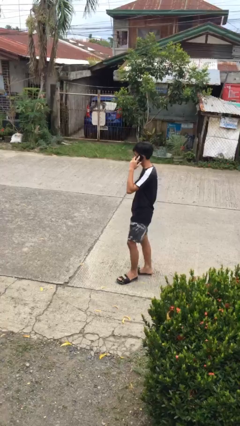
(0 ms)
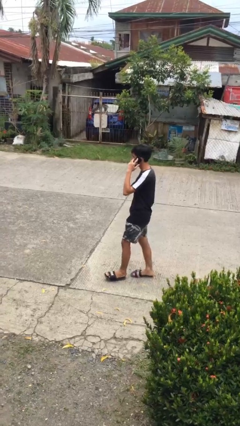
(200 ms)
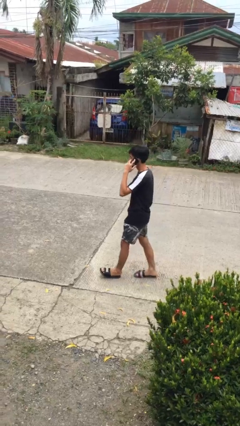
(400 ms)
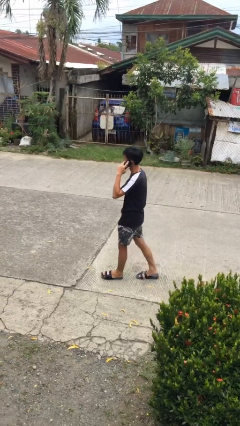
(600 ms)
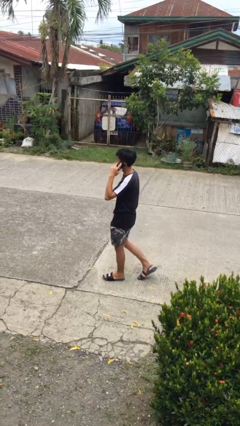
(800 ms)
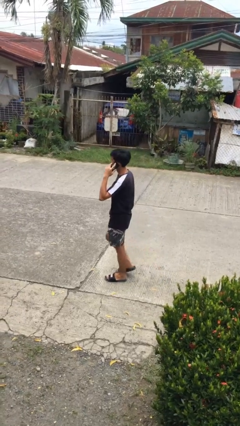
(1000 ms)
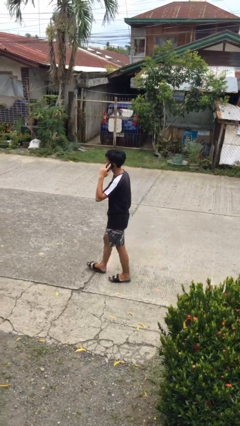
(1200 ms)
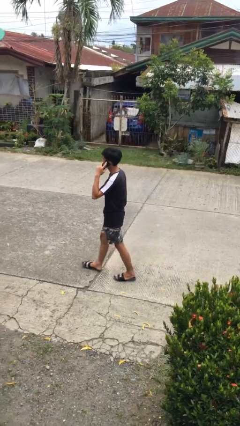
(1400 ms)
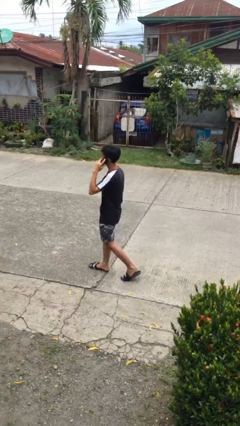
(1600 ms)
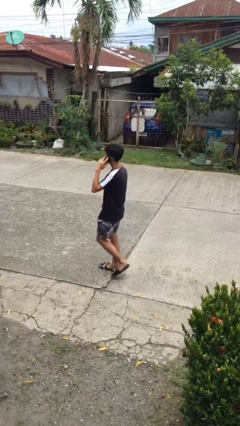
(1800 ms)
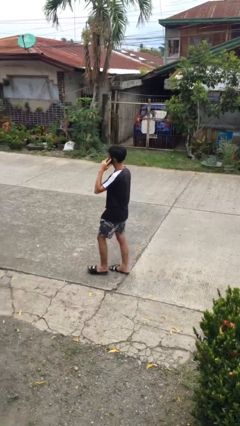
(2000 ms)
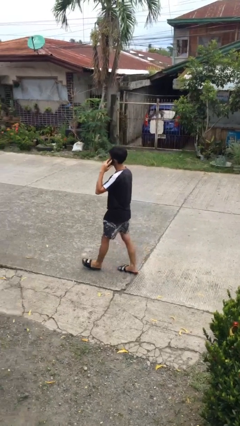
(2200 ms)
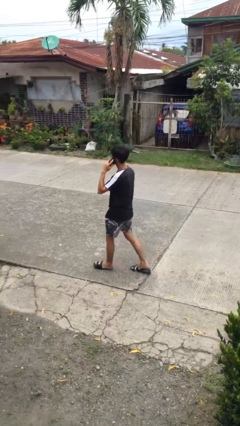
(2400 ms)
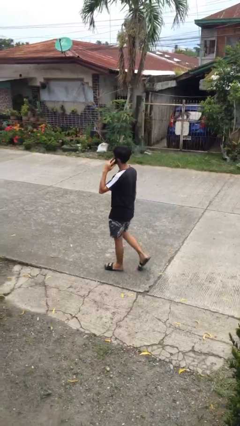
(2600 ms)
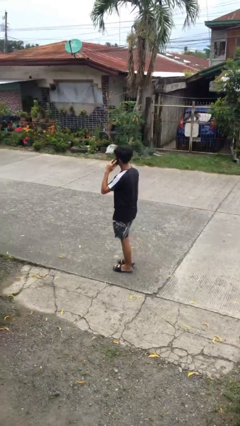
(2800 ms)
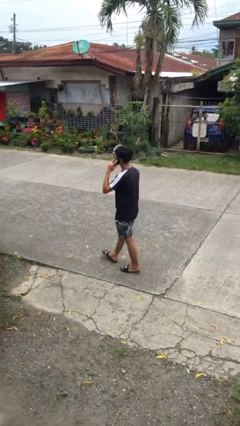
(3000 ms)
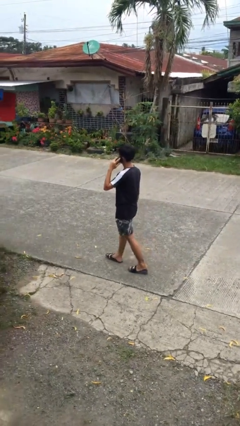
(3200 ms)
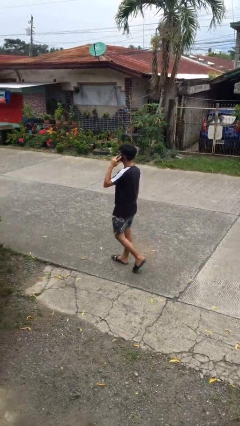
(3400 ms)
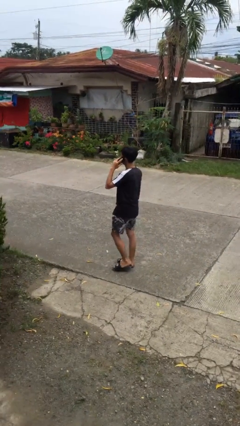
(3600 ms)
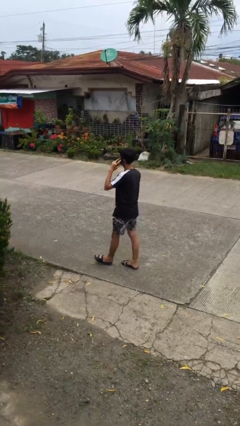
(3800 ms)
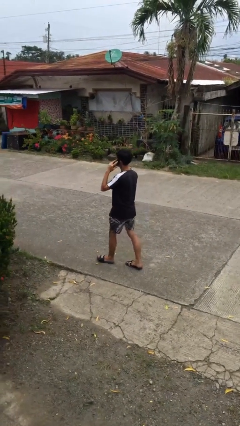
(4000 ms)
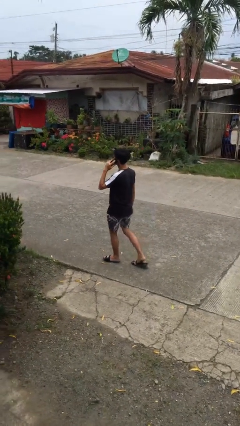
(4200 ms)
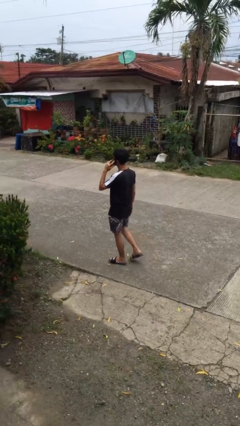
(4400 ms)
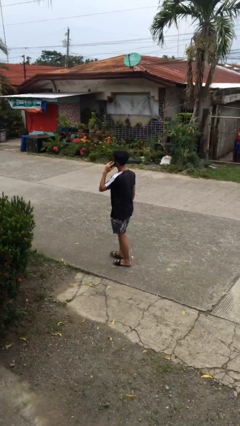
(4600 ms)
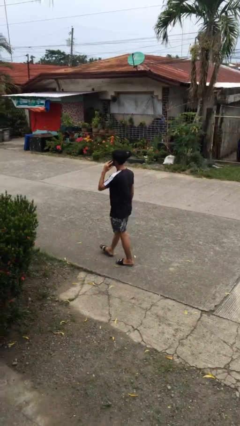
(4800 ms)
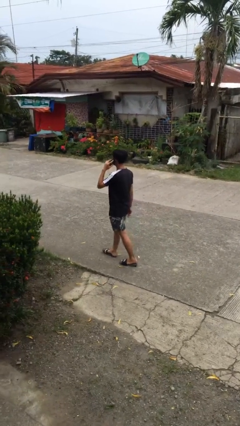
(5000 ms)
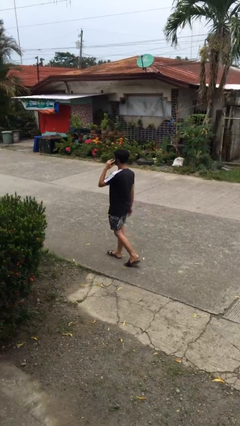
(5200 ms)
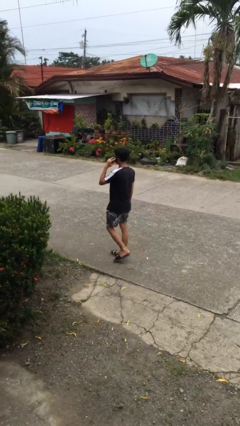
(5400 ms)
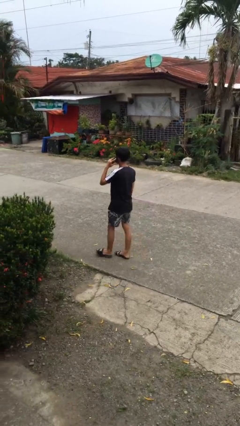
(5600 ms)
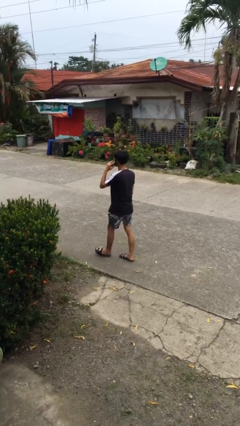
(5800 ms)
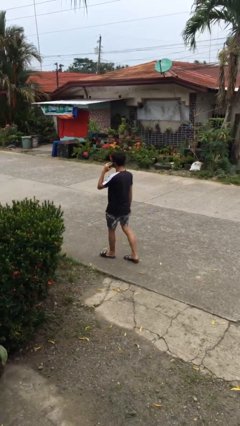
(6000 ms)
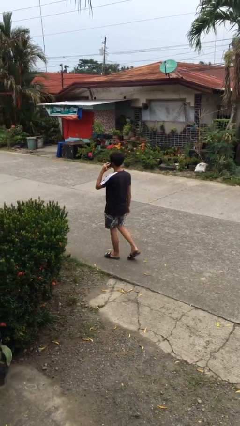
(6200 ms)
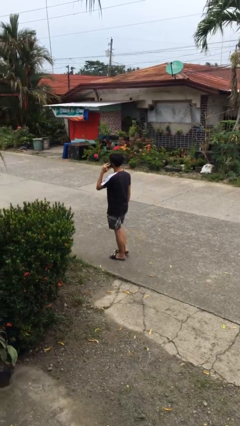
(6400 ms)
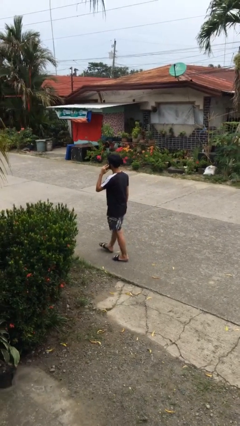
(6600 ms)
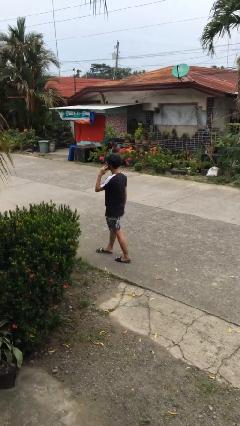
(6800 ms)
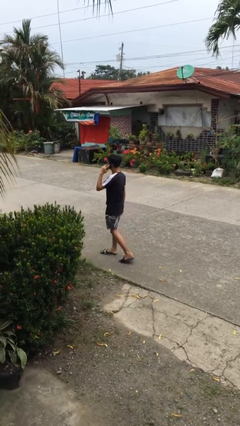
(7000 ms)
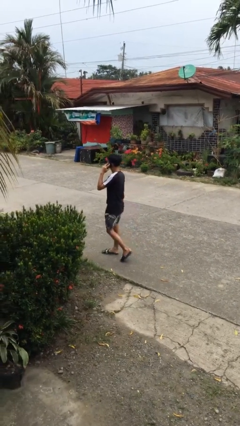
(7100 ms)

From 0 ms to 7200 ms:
person talks on phone

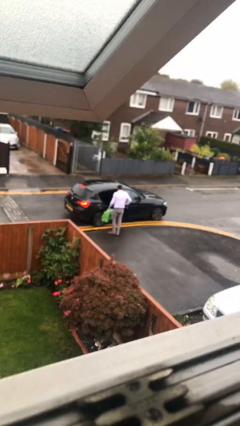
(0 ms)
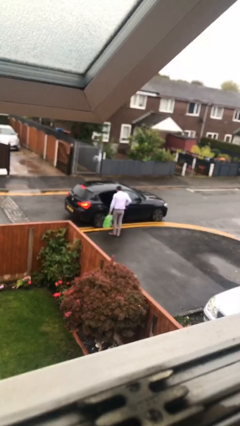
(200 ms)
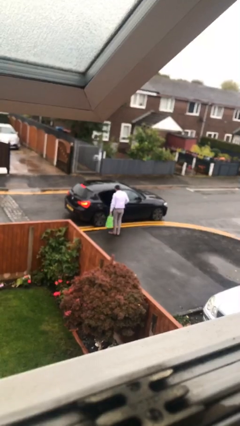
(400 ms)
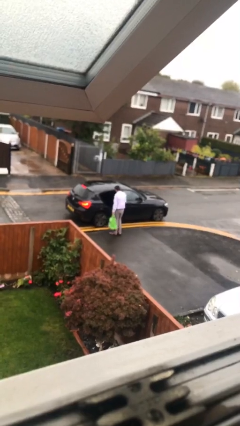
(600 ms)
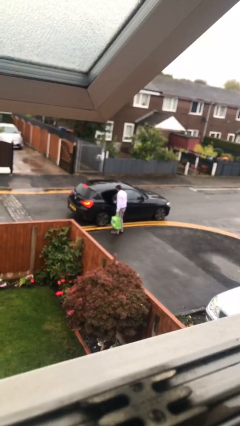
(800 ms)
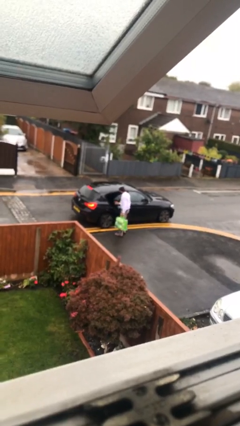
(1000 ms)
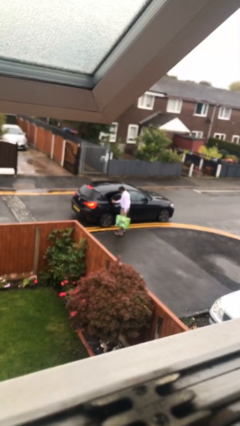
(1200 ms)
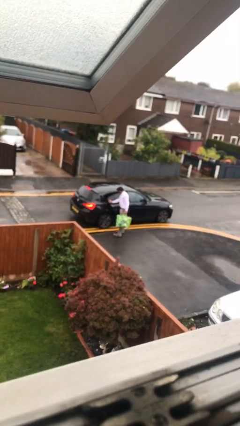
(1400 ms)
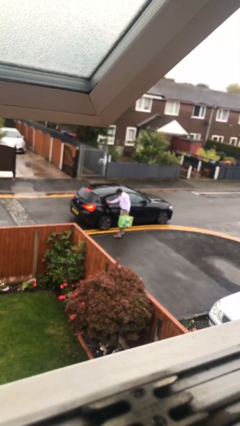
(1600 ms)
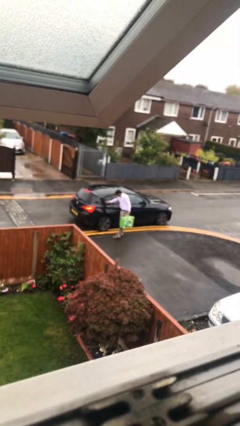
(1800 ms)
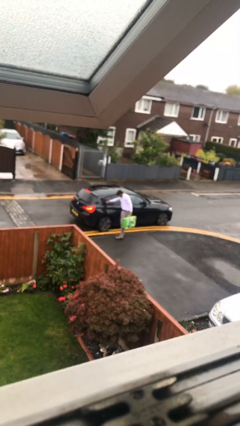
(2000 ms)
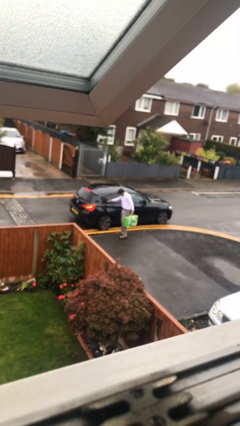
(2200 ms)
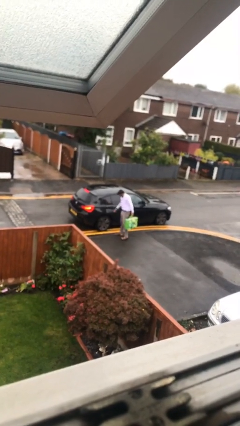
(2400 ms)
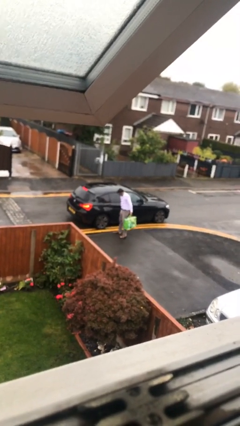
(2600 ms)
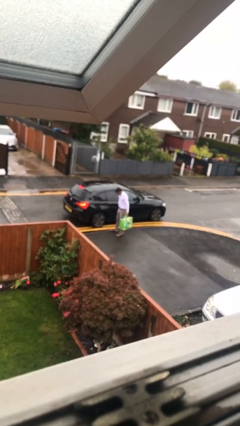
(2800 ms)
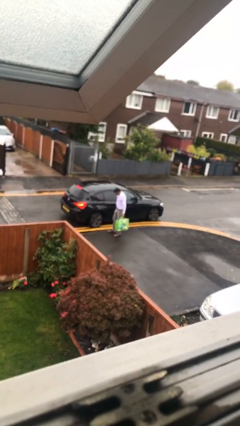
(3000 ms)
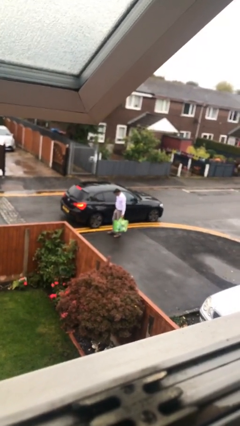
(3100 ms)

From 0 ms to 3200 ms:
person closes car door

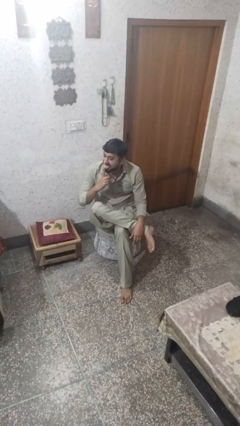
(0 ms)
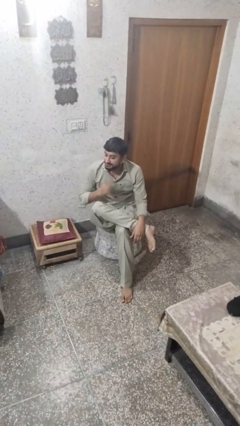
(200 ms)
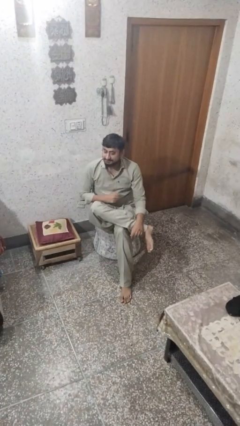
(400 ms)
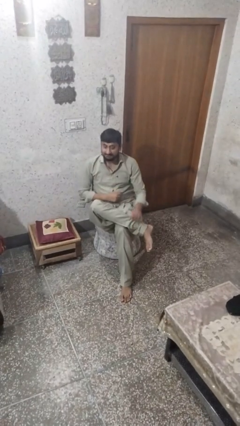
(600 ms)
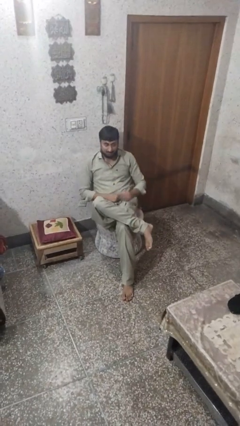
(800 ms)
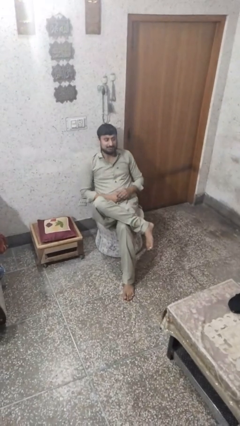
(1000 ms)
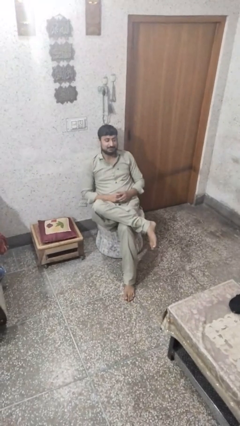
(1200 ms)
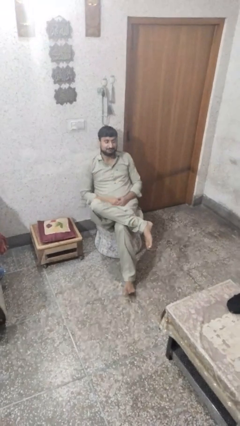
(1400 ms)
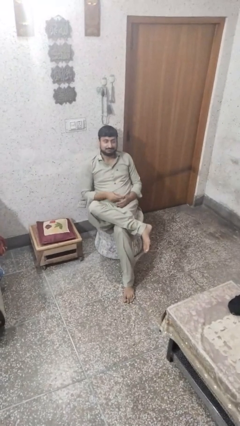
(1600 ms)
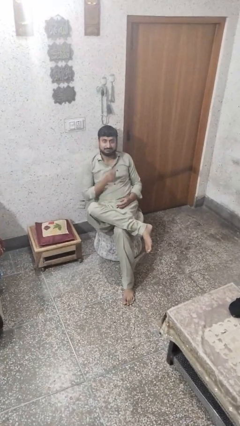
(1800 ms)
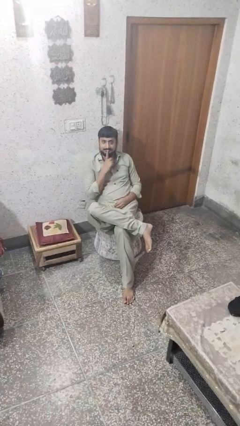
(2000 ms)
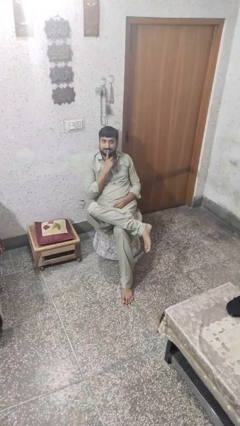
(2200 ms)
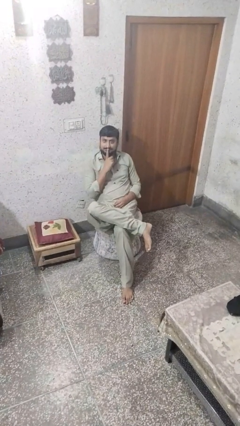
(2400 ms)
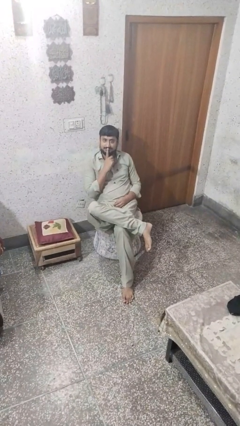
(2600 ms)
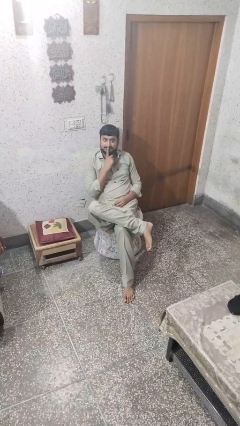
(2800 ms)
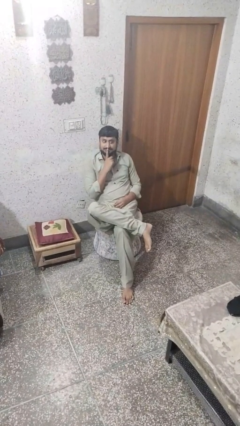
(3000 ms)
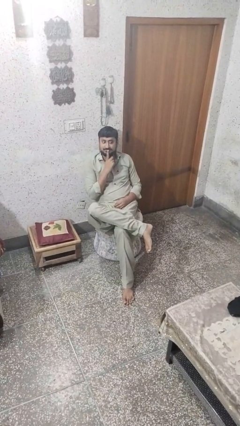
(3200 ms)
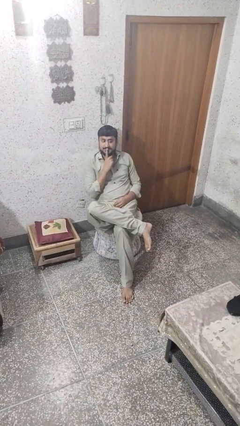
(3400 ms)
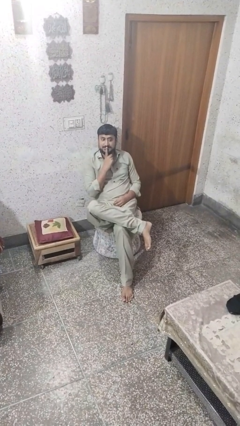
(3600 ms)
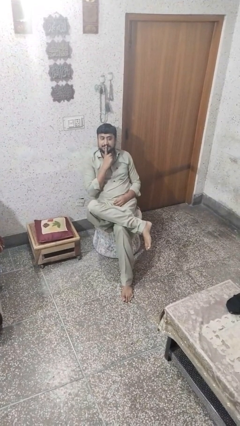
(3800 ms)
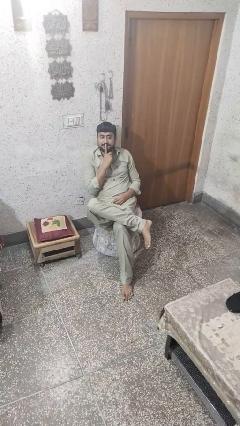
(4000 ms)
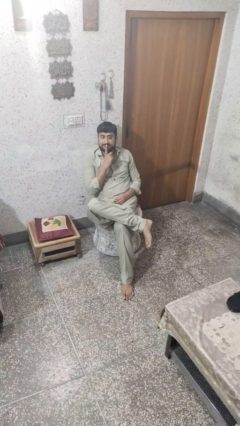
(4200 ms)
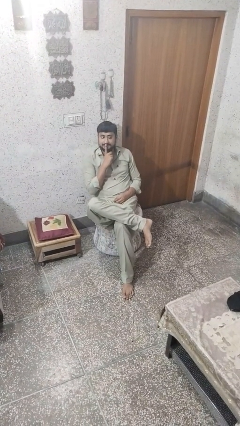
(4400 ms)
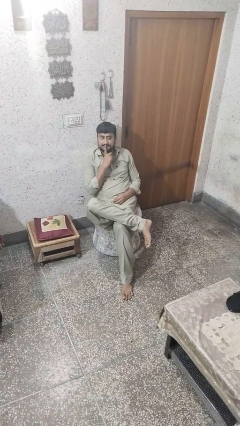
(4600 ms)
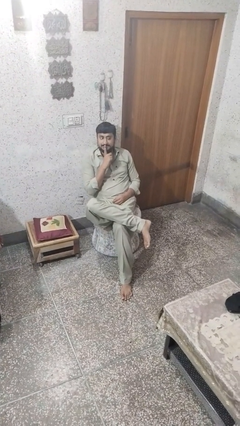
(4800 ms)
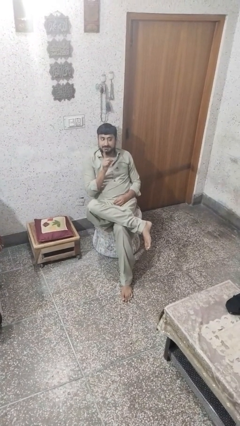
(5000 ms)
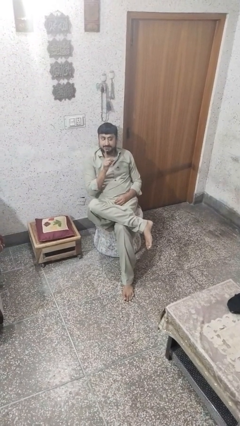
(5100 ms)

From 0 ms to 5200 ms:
person gestures be quiet

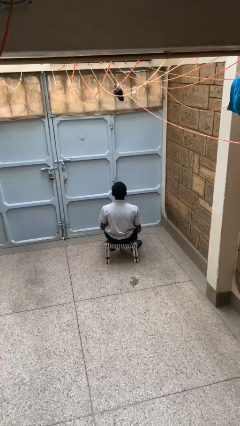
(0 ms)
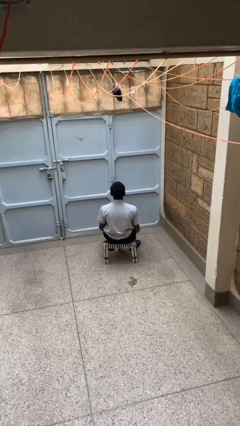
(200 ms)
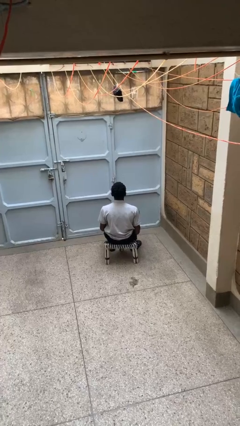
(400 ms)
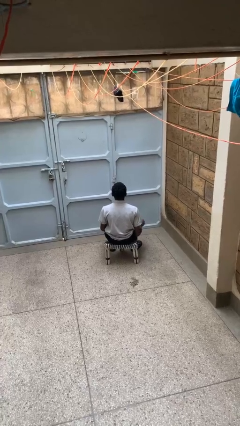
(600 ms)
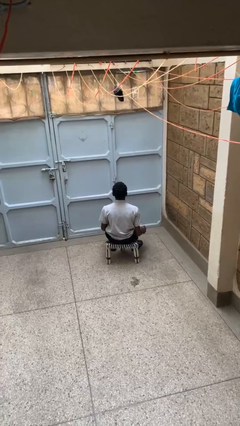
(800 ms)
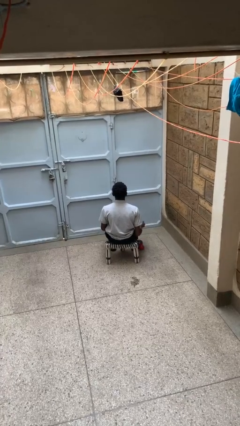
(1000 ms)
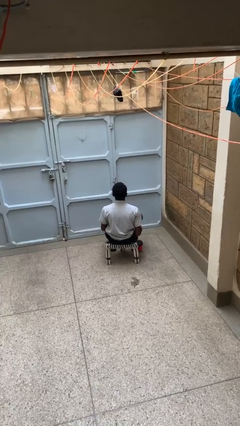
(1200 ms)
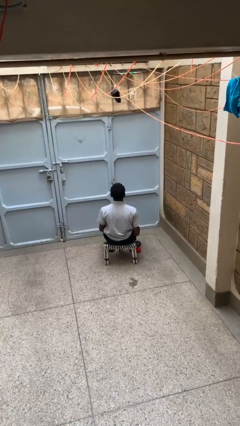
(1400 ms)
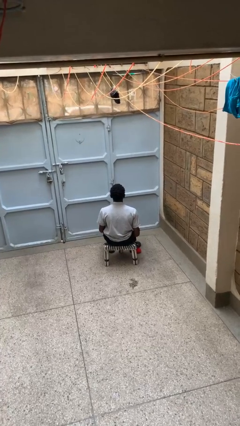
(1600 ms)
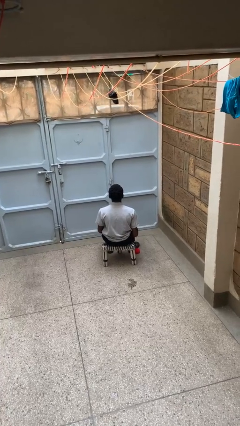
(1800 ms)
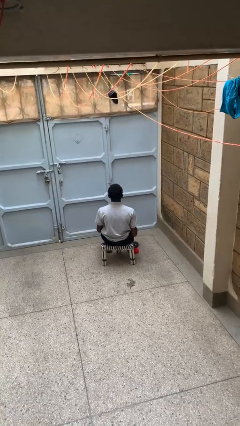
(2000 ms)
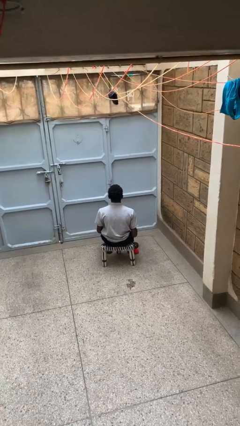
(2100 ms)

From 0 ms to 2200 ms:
person drops object
